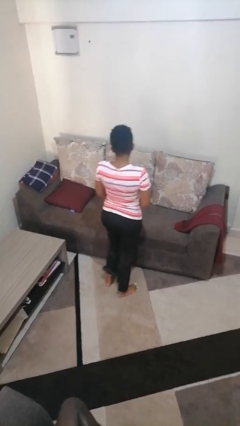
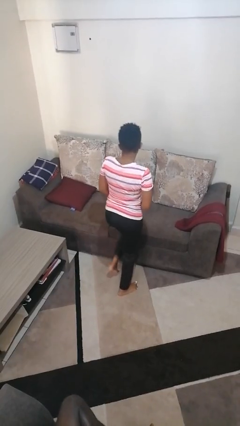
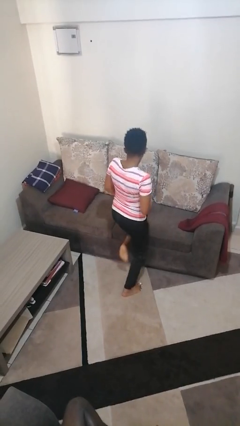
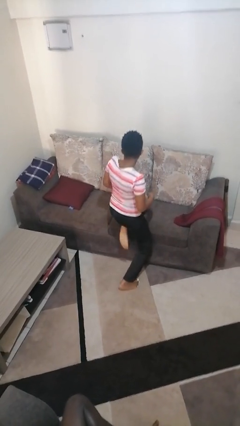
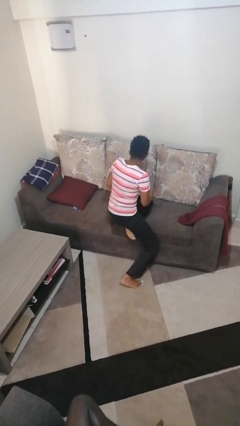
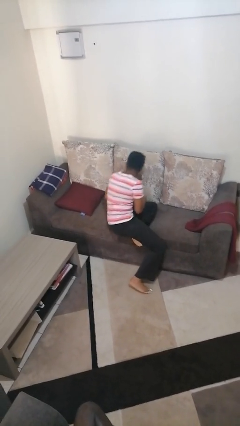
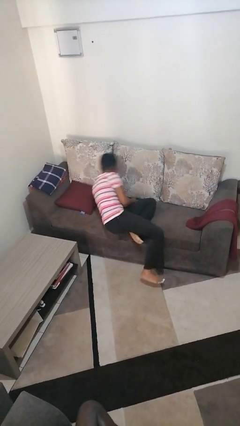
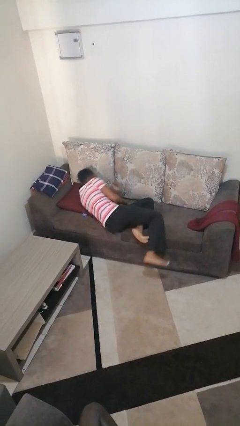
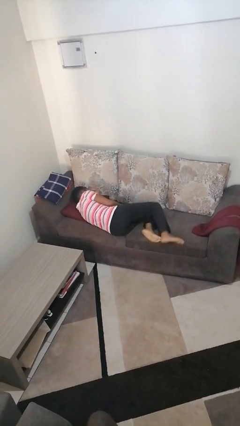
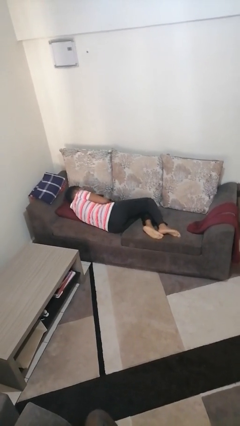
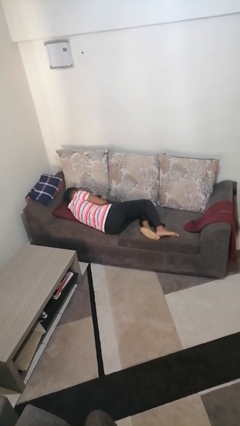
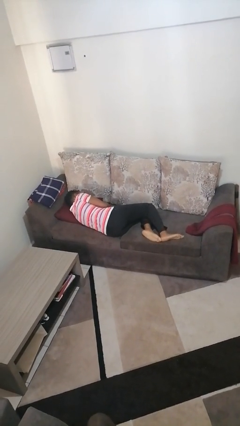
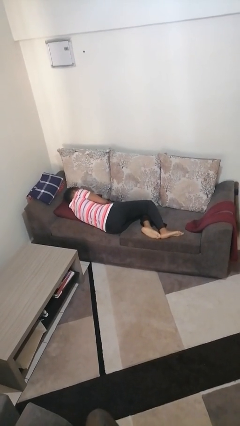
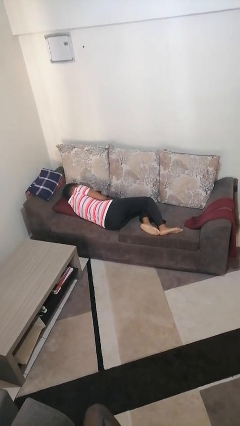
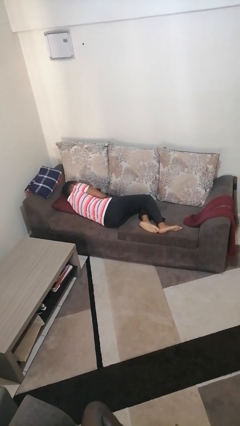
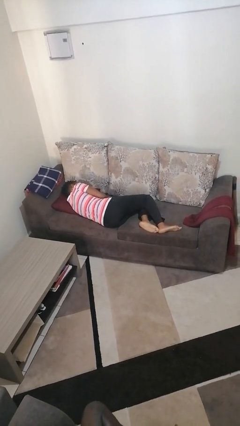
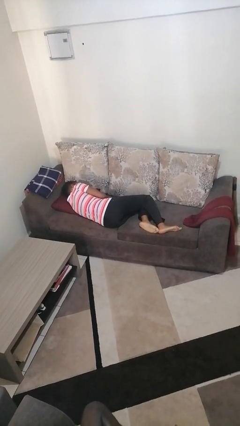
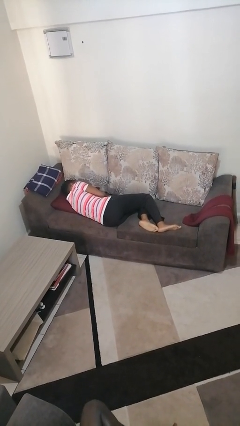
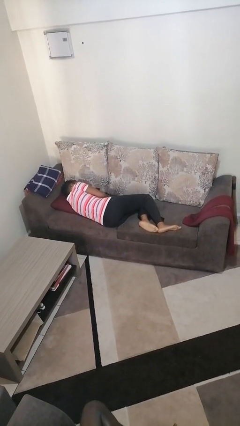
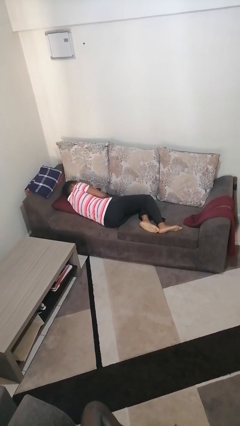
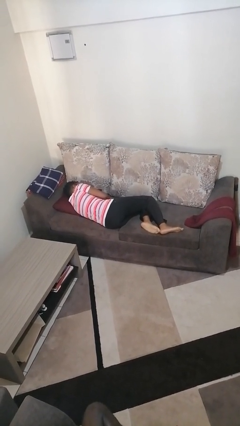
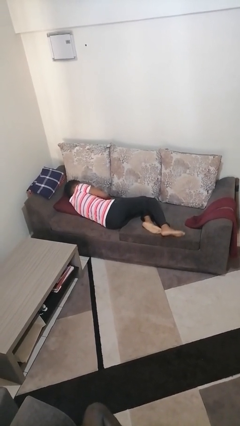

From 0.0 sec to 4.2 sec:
person lies down on bed

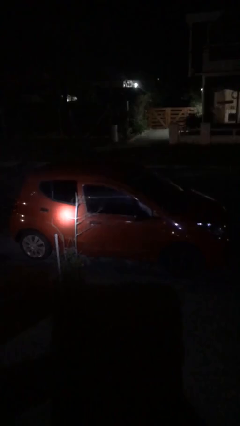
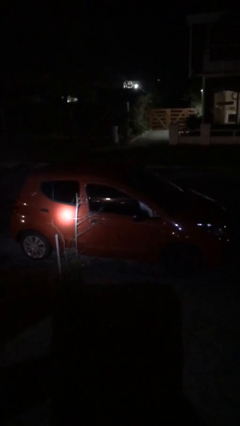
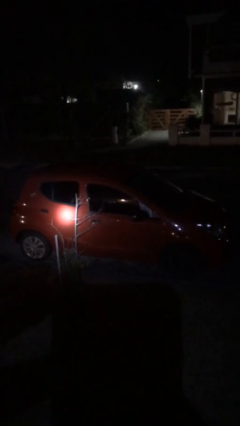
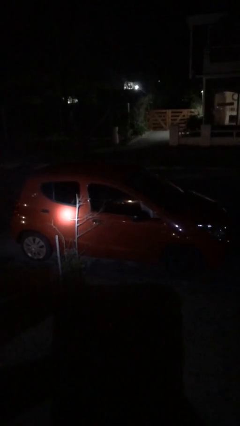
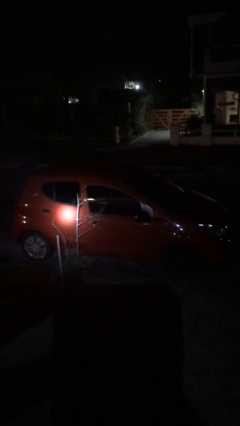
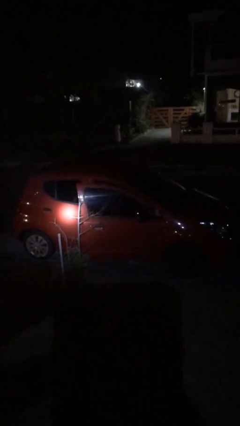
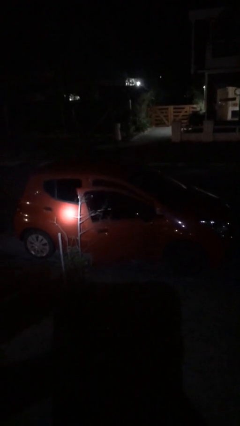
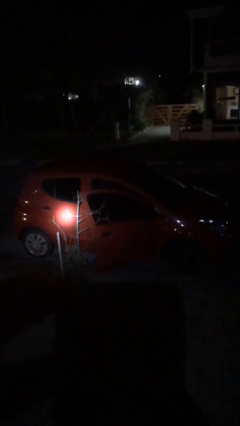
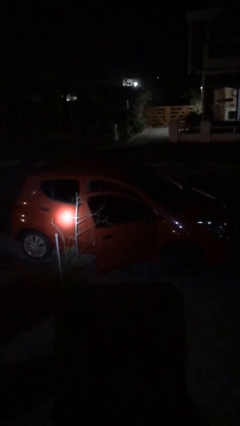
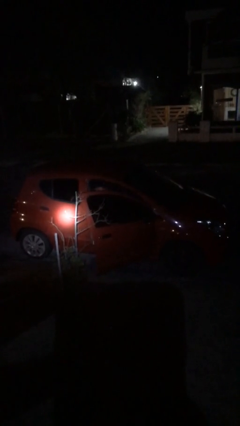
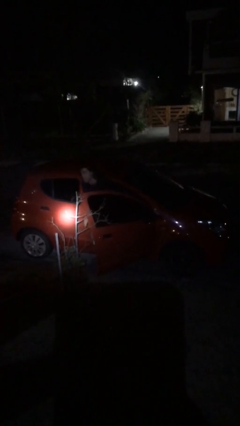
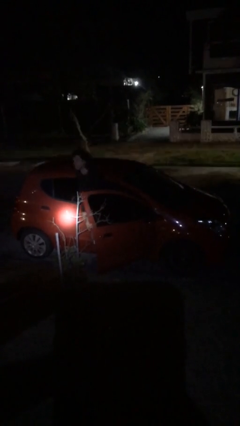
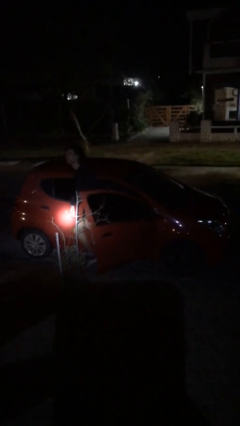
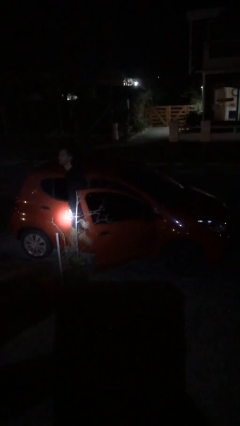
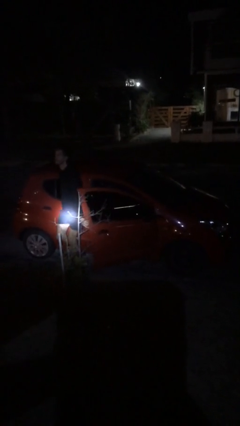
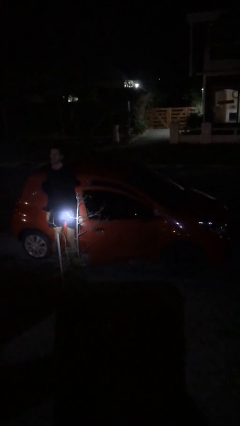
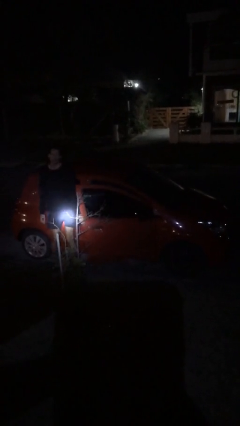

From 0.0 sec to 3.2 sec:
car drops off person

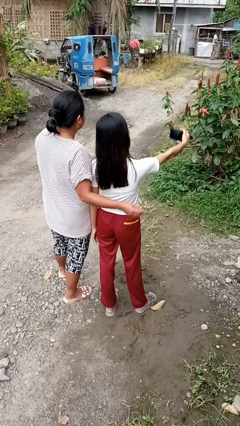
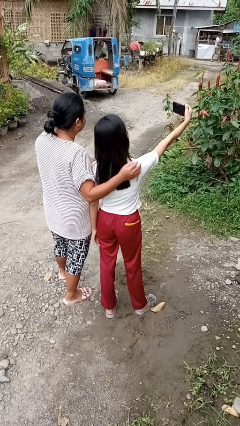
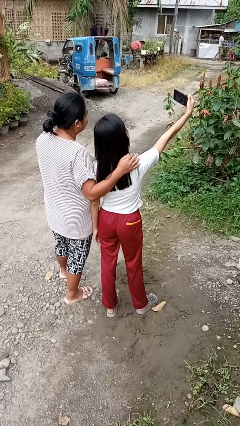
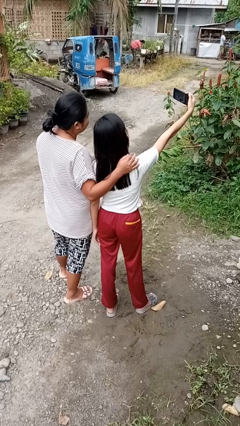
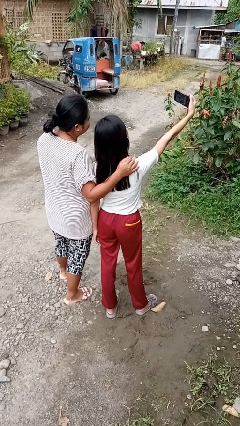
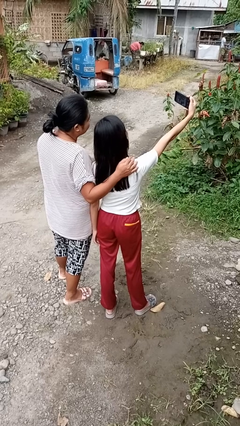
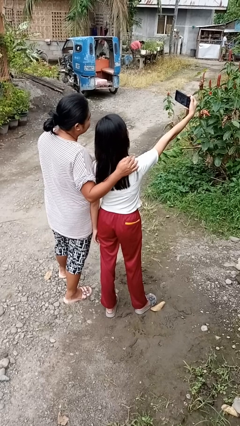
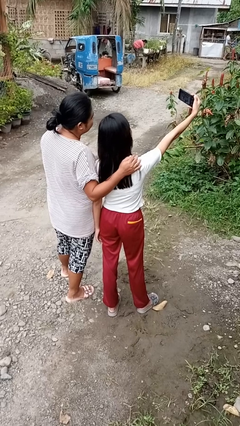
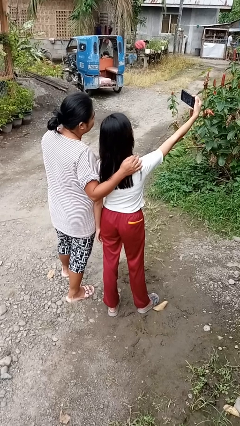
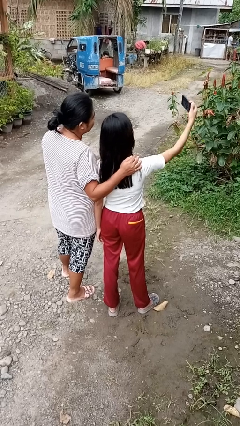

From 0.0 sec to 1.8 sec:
person takes selfie with person

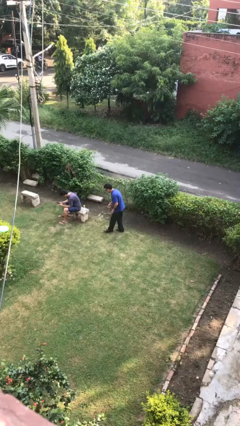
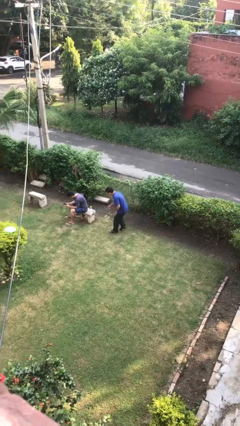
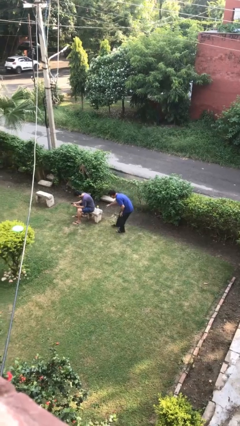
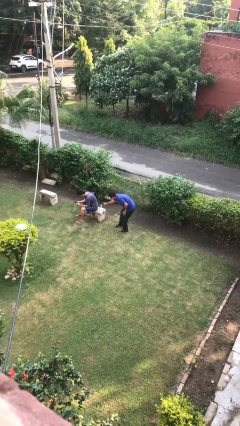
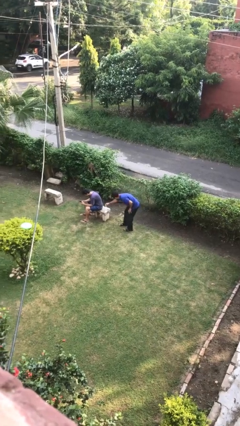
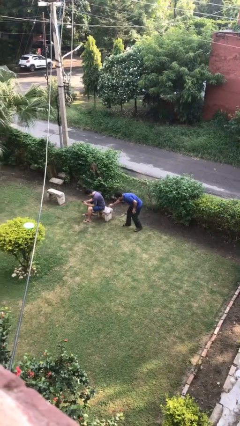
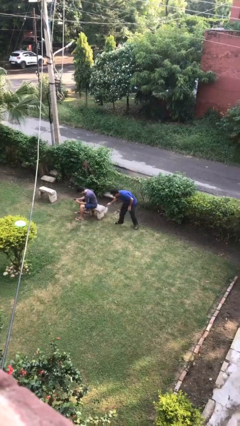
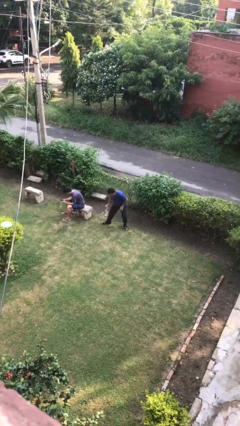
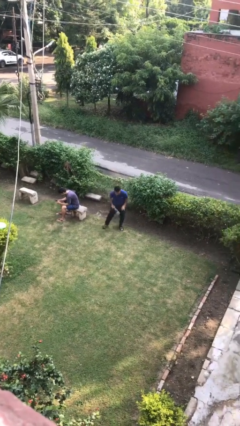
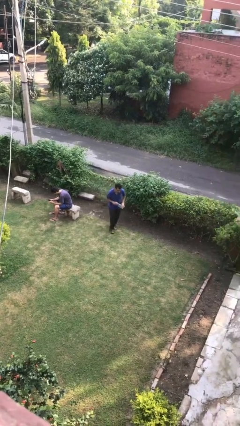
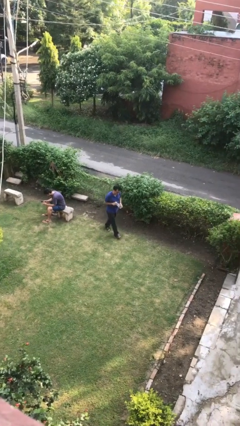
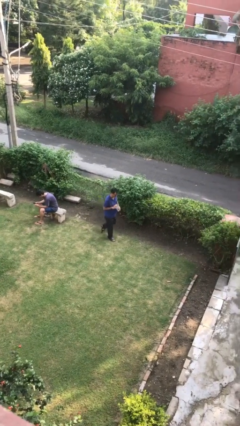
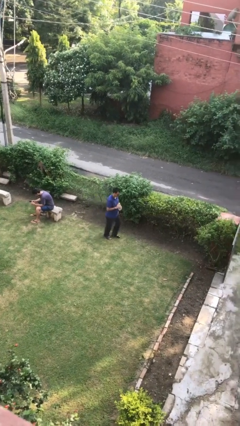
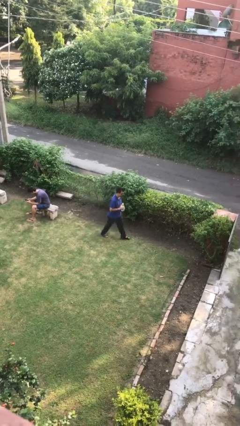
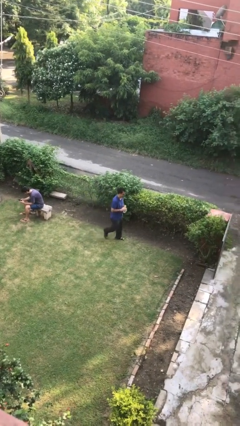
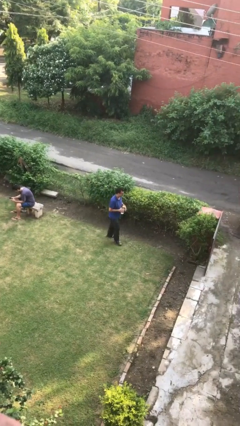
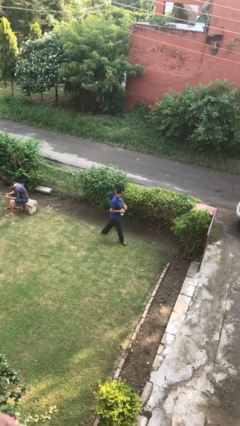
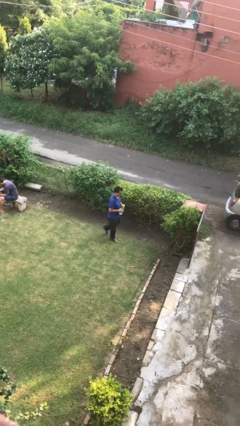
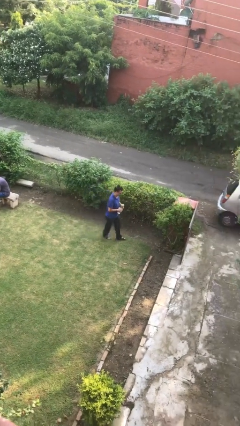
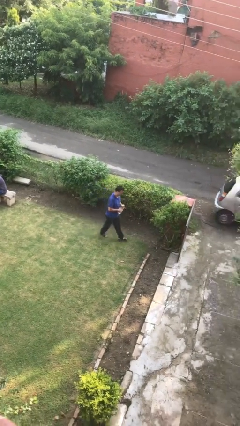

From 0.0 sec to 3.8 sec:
person steals object from person

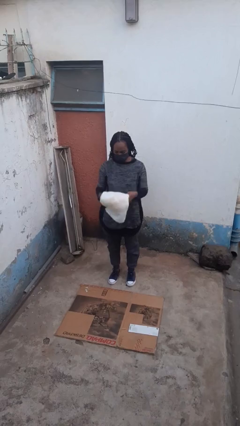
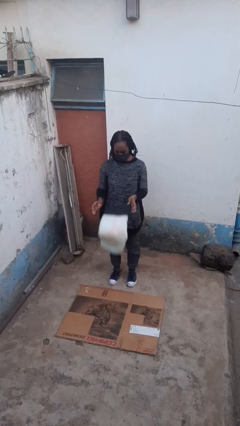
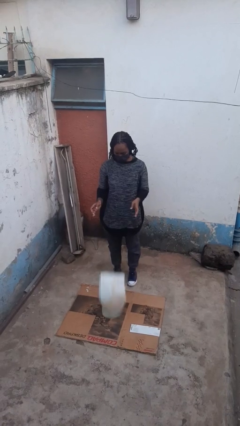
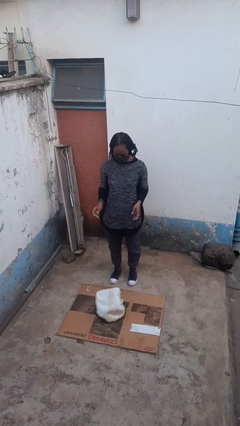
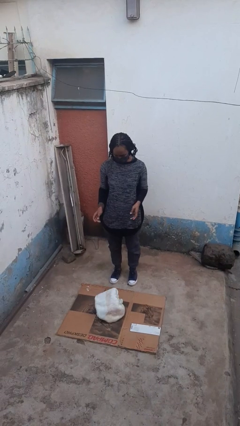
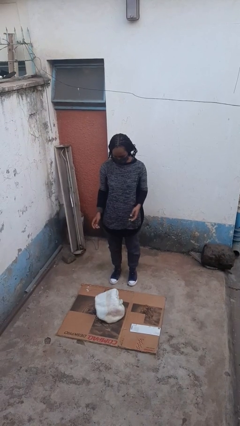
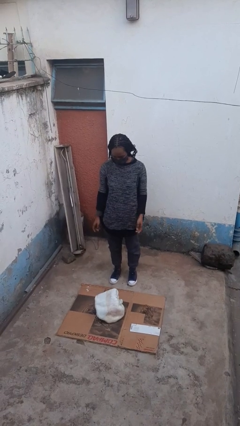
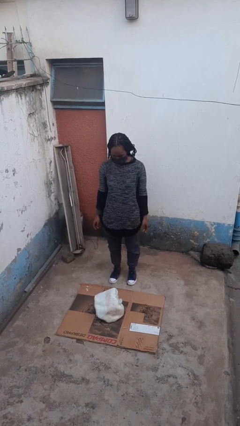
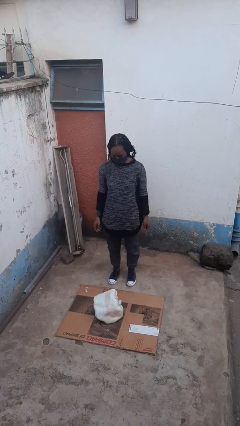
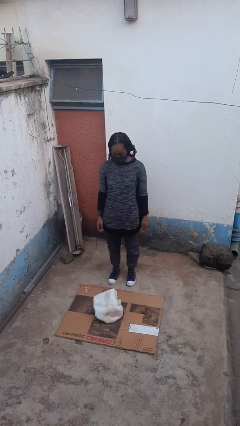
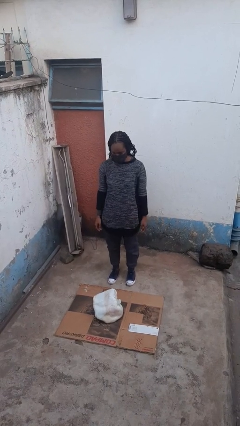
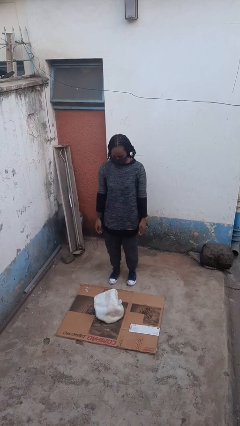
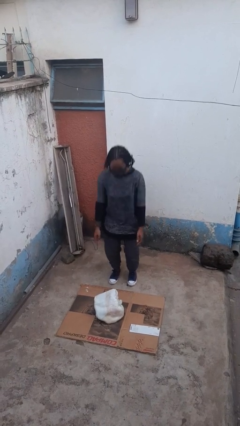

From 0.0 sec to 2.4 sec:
person drops object

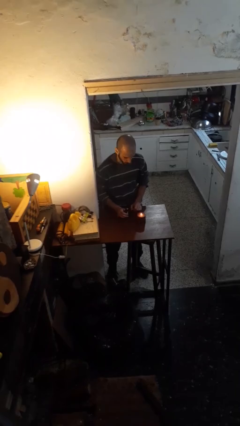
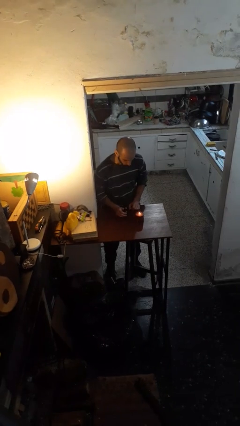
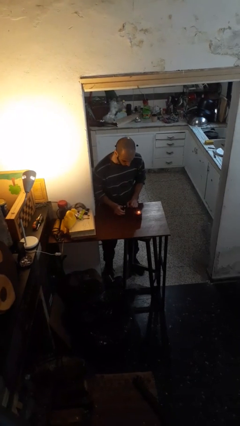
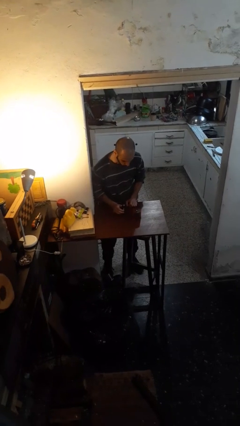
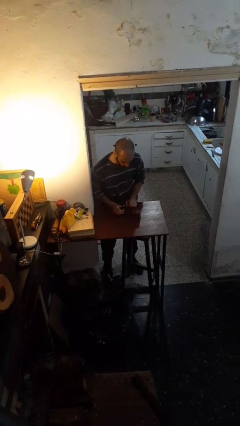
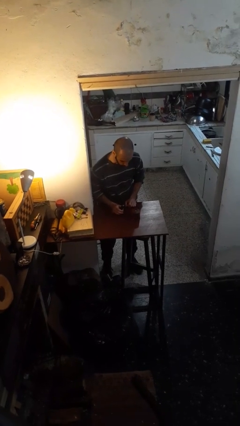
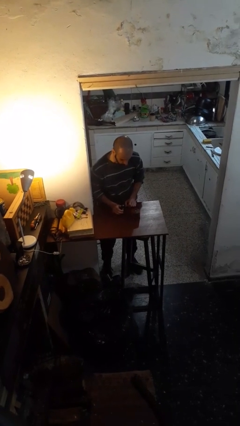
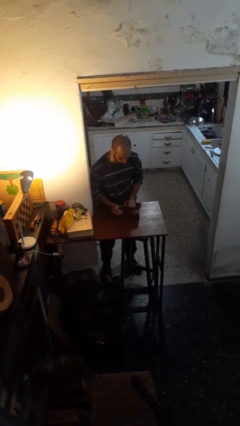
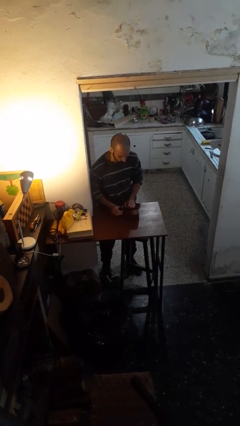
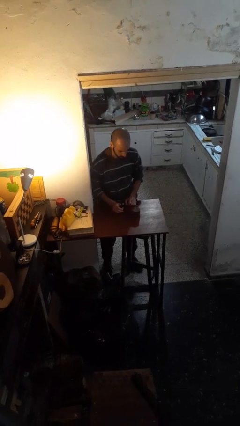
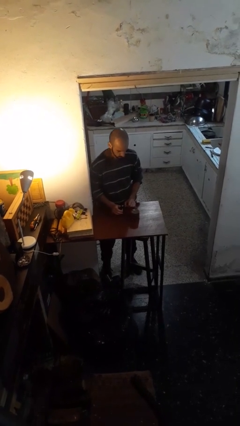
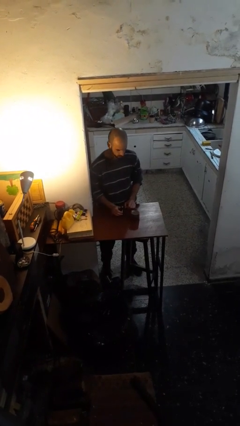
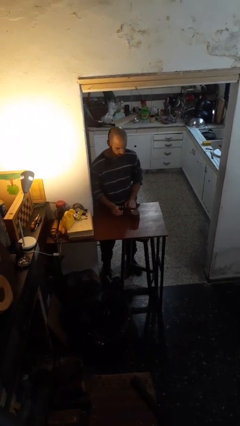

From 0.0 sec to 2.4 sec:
person extinguishes candle
